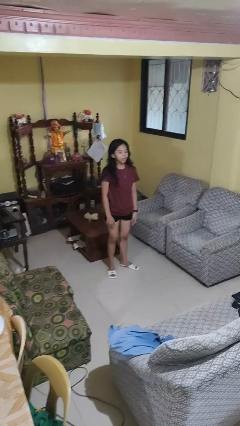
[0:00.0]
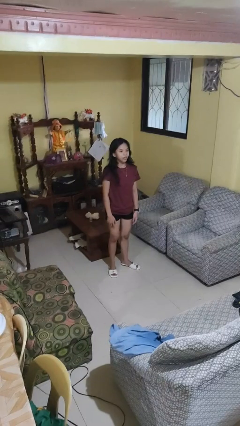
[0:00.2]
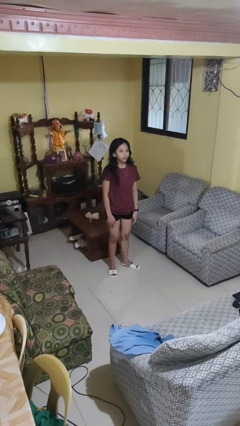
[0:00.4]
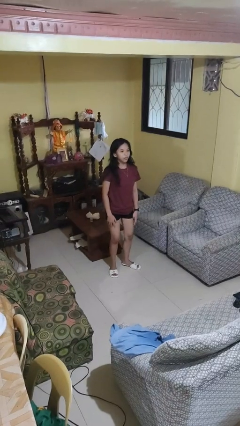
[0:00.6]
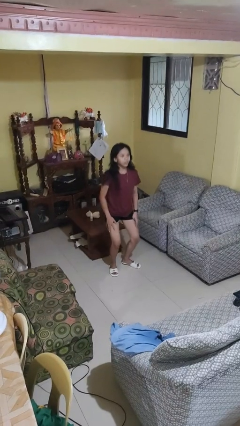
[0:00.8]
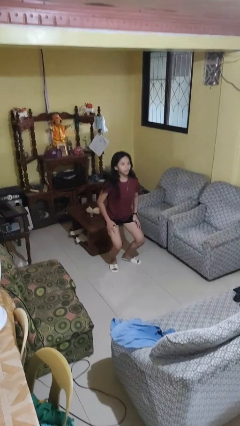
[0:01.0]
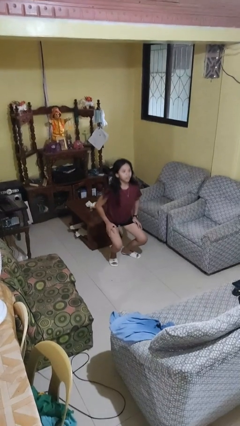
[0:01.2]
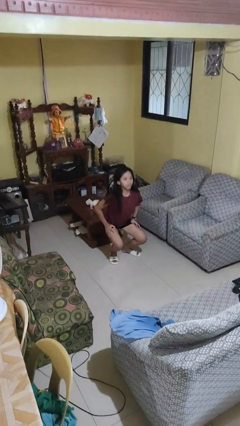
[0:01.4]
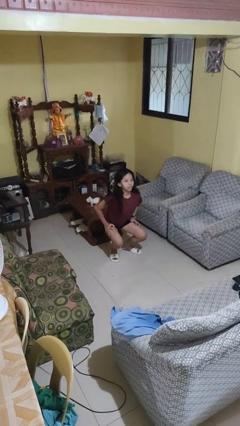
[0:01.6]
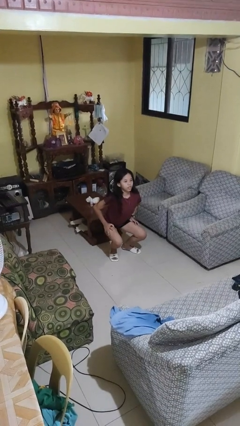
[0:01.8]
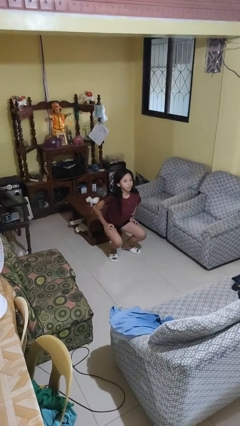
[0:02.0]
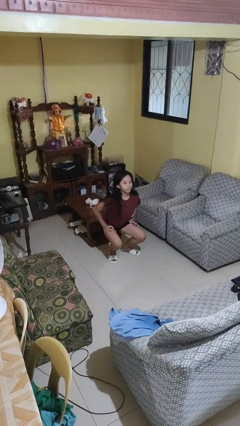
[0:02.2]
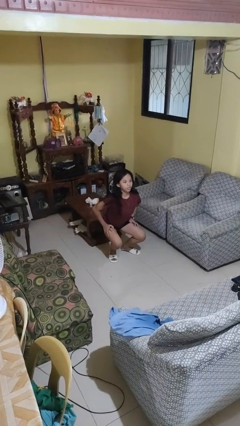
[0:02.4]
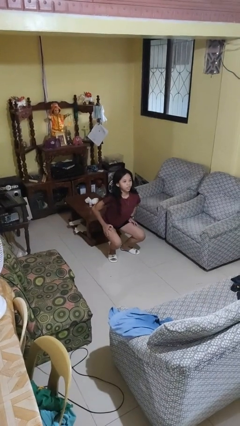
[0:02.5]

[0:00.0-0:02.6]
person squats

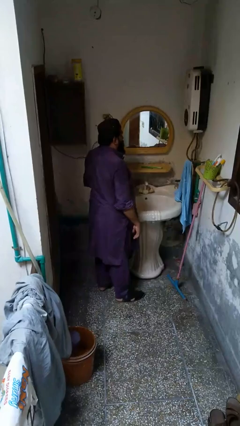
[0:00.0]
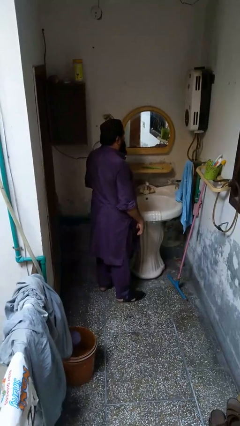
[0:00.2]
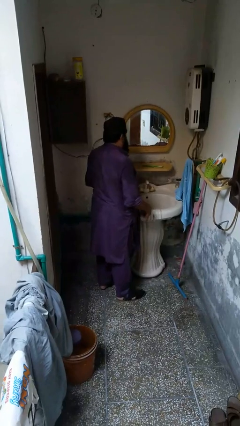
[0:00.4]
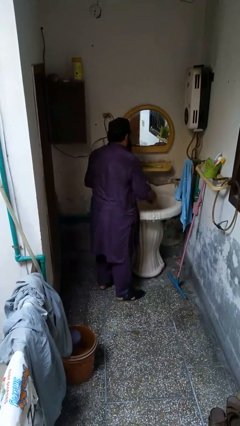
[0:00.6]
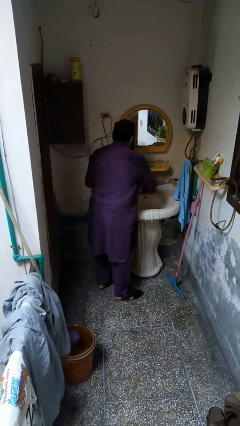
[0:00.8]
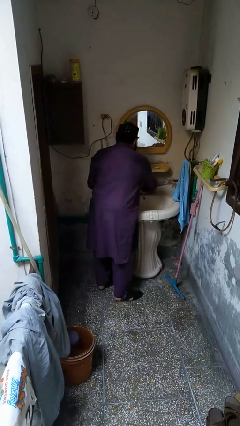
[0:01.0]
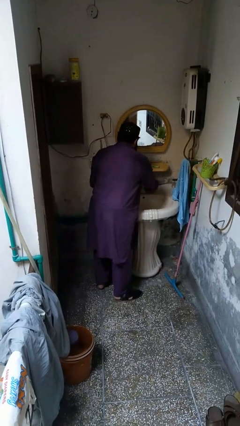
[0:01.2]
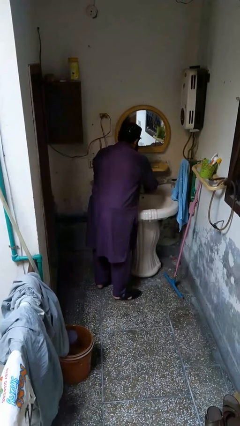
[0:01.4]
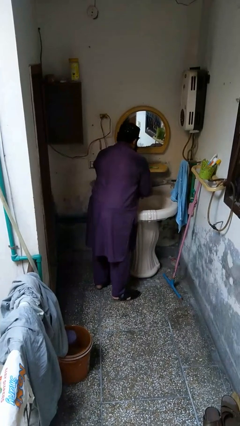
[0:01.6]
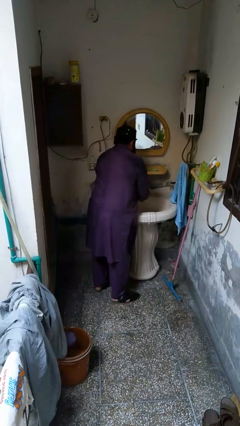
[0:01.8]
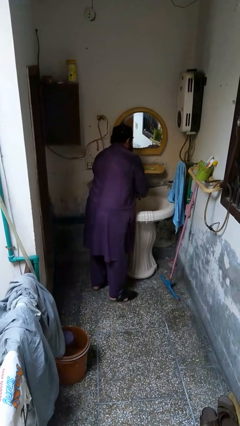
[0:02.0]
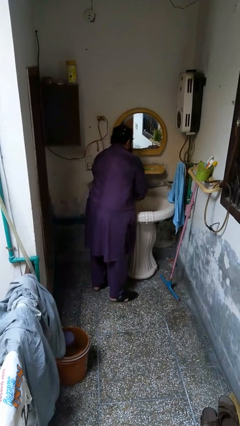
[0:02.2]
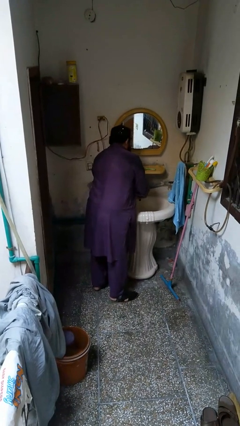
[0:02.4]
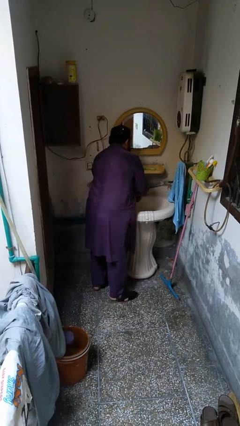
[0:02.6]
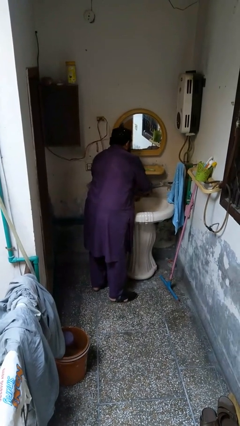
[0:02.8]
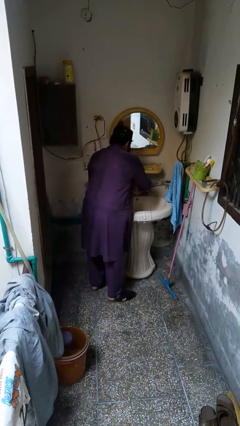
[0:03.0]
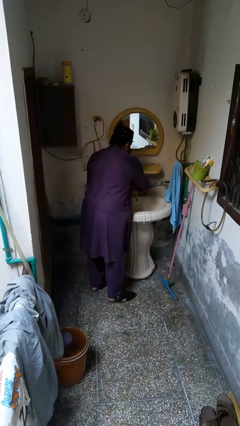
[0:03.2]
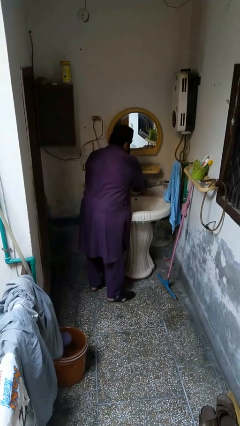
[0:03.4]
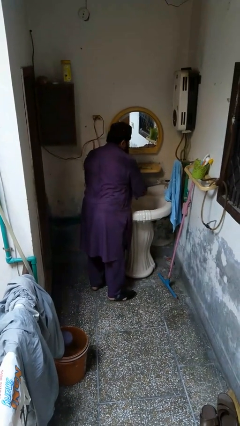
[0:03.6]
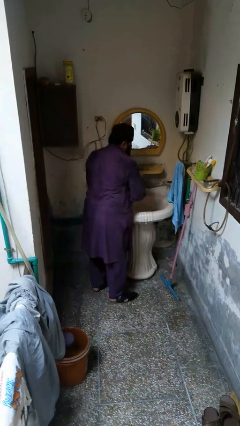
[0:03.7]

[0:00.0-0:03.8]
person washes hands

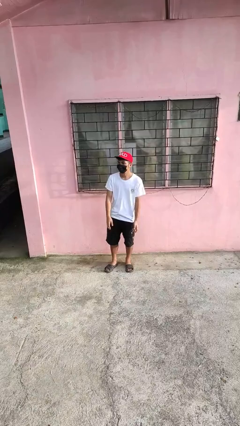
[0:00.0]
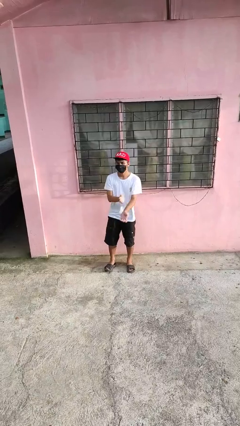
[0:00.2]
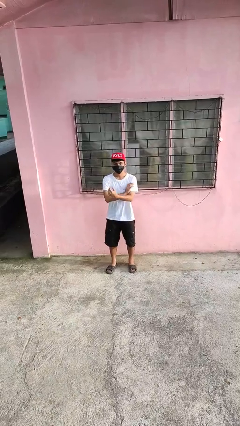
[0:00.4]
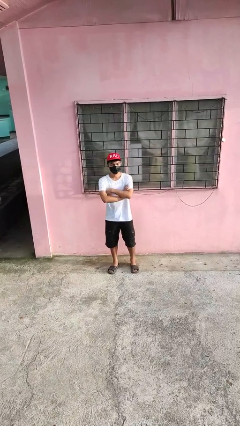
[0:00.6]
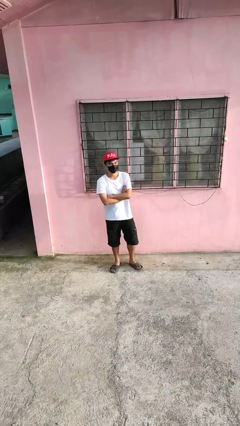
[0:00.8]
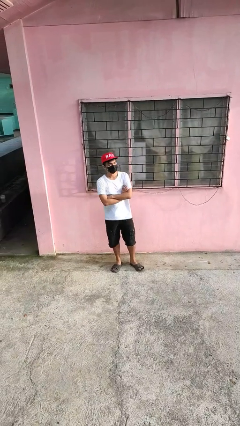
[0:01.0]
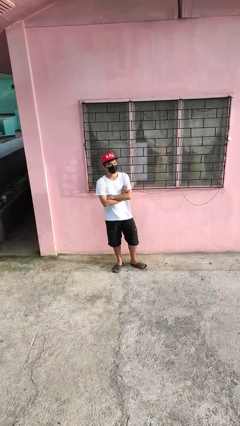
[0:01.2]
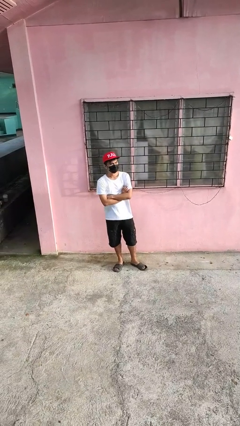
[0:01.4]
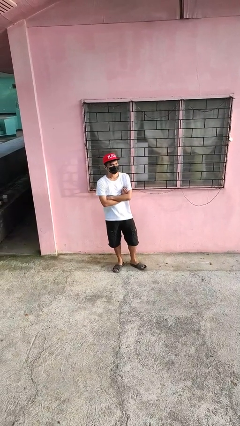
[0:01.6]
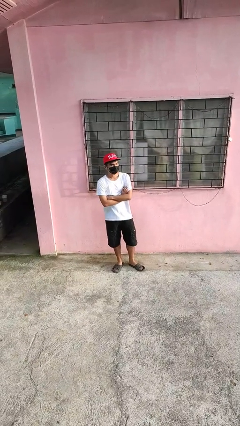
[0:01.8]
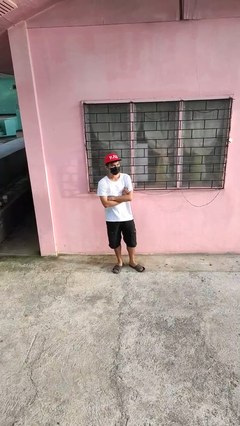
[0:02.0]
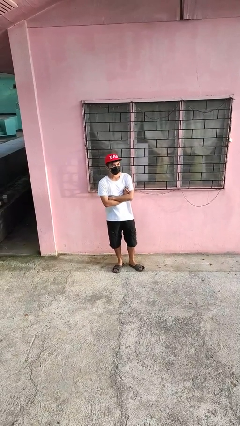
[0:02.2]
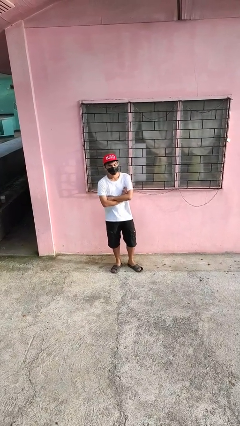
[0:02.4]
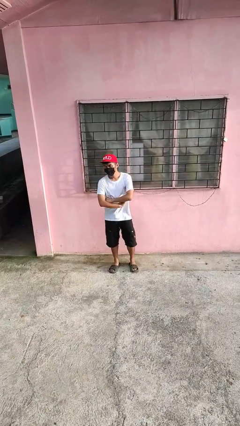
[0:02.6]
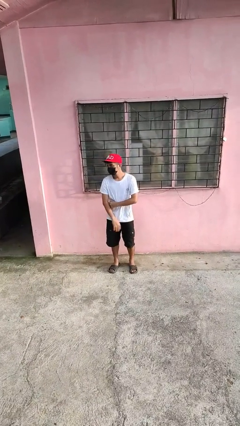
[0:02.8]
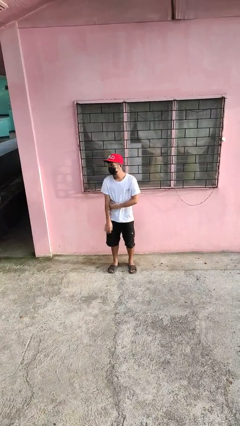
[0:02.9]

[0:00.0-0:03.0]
person crosses arms

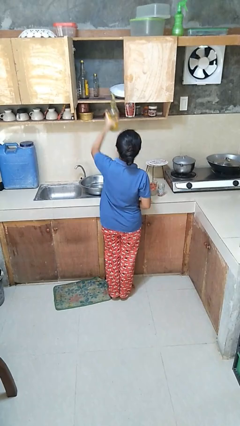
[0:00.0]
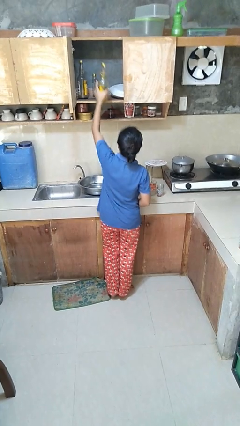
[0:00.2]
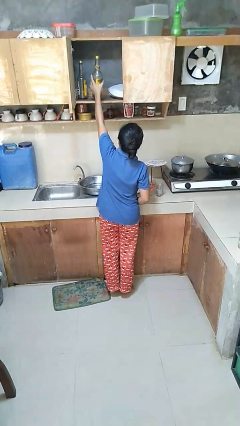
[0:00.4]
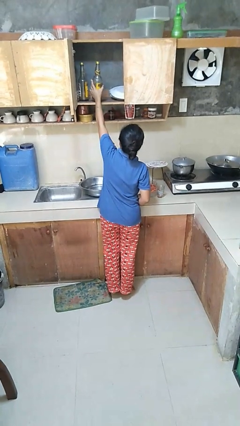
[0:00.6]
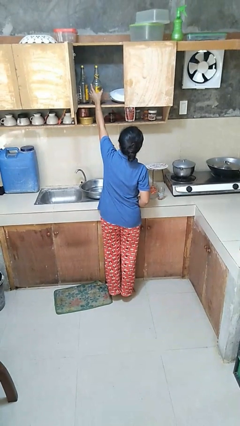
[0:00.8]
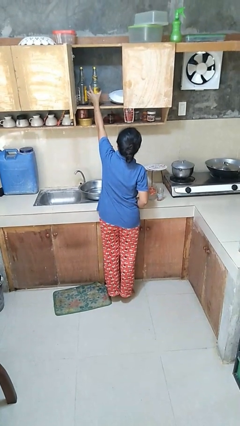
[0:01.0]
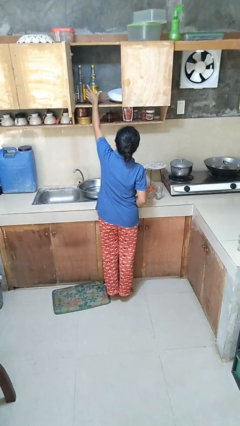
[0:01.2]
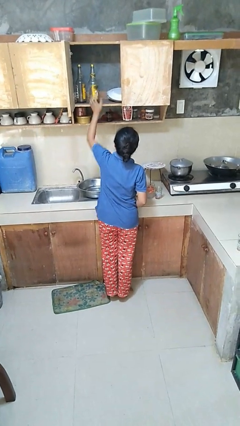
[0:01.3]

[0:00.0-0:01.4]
person puts object in cabinet

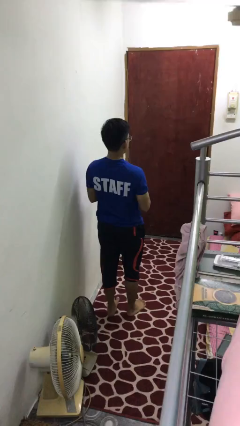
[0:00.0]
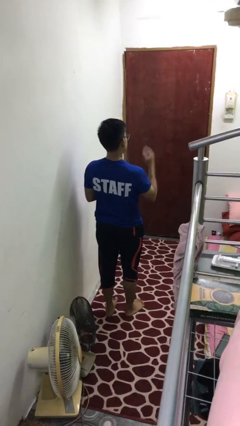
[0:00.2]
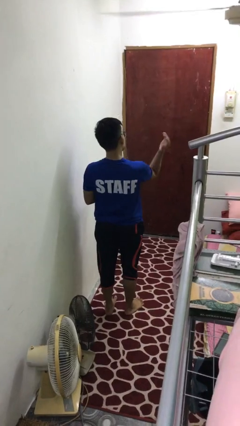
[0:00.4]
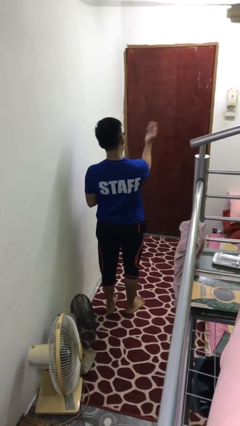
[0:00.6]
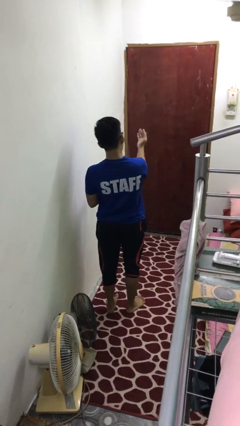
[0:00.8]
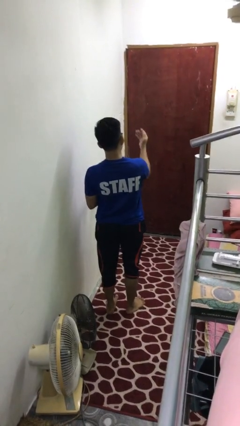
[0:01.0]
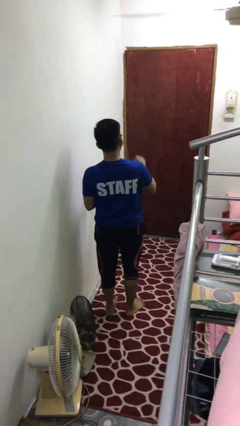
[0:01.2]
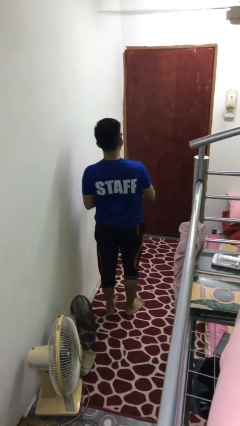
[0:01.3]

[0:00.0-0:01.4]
person karate chop

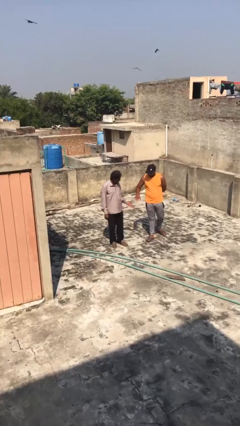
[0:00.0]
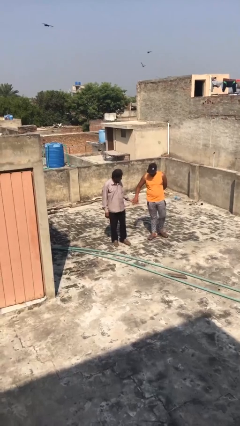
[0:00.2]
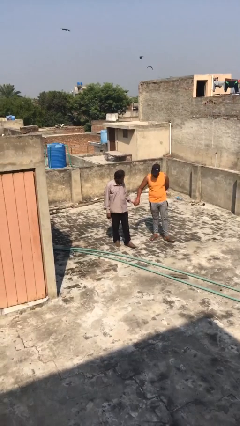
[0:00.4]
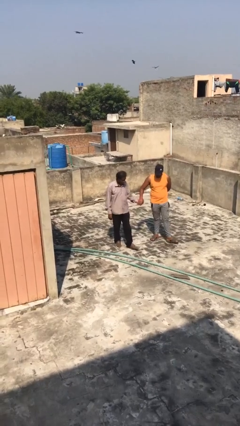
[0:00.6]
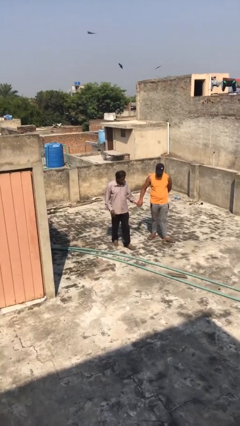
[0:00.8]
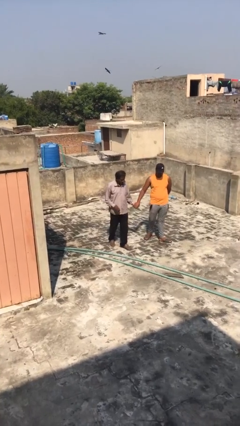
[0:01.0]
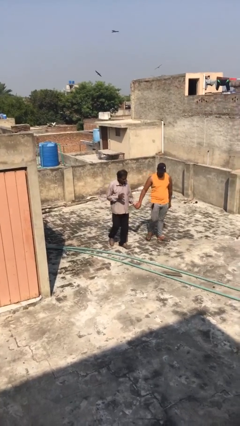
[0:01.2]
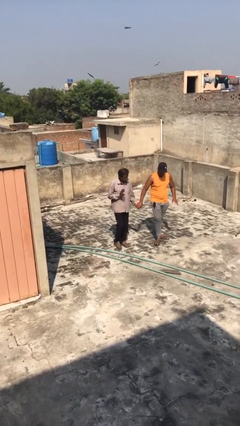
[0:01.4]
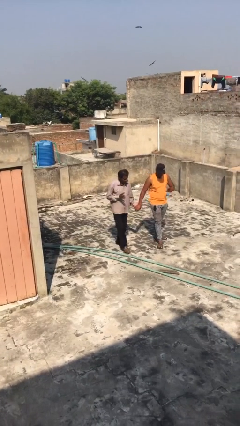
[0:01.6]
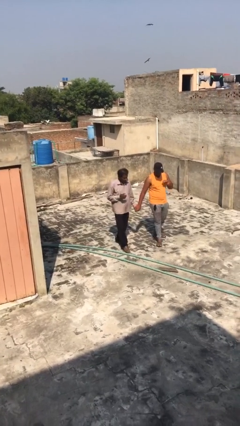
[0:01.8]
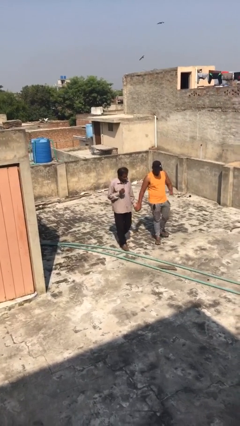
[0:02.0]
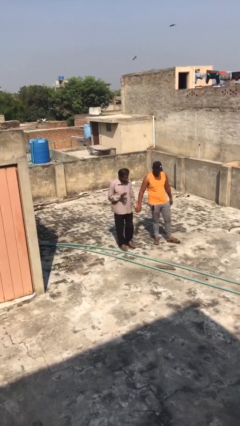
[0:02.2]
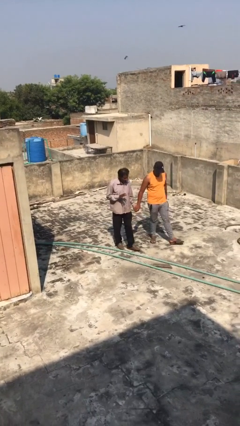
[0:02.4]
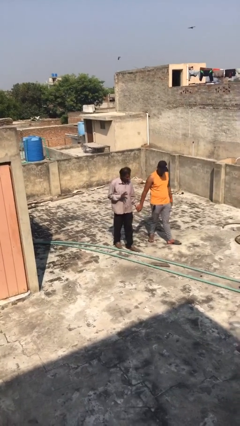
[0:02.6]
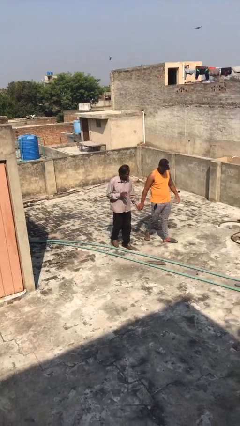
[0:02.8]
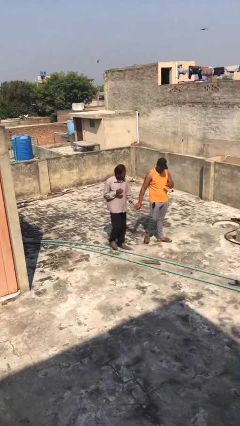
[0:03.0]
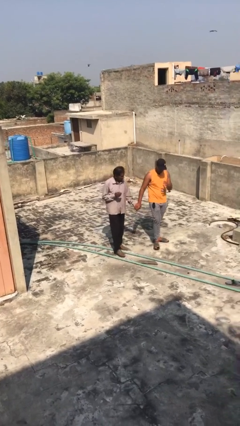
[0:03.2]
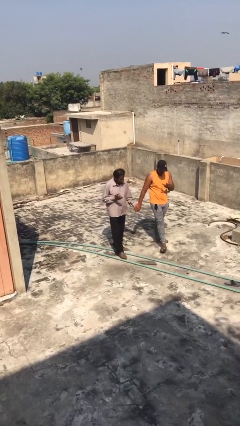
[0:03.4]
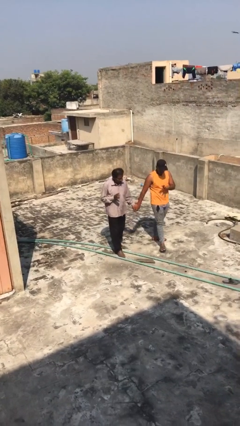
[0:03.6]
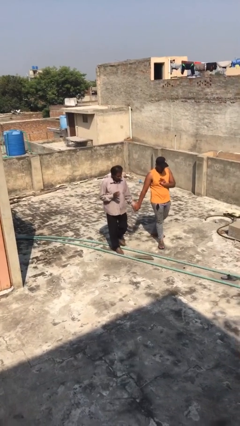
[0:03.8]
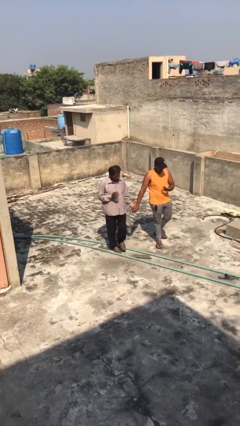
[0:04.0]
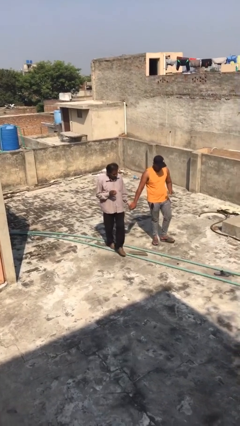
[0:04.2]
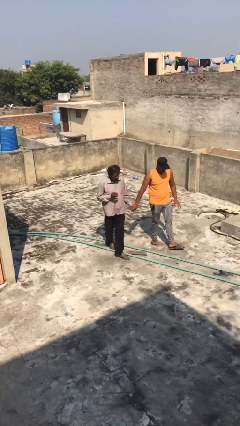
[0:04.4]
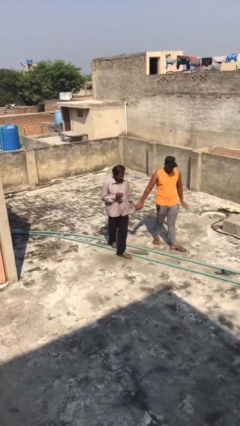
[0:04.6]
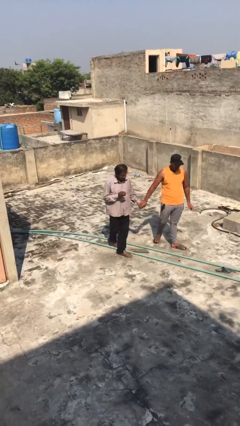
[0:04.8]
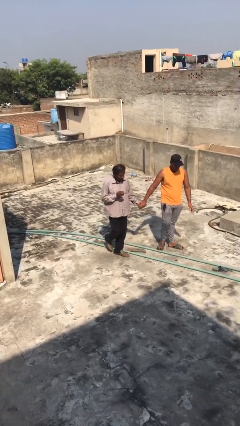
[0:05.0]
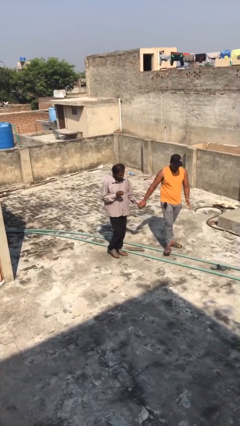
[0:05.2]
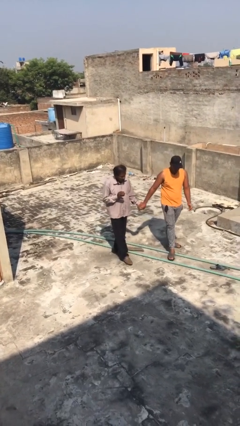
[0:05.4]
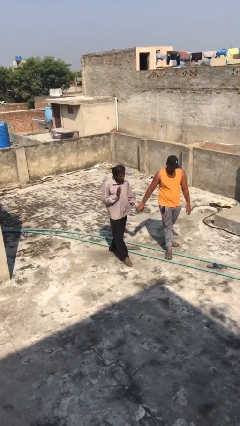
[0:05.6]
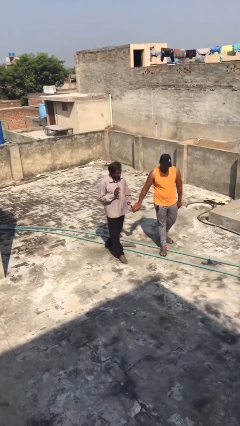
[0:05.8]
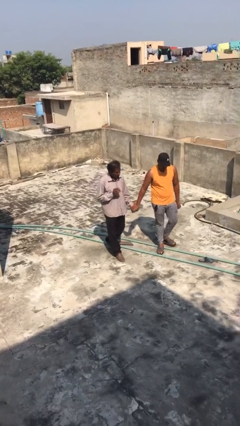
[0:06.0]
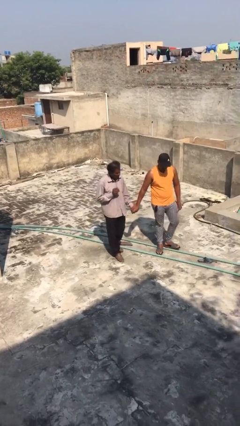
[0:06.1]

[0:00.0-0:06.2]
person holds hand
